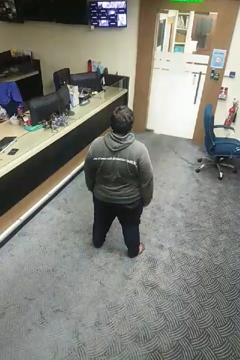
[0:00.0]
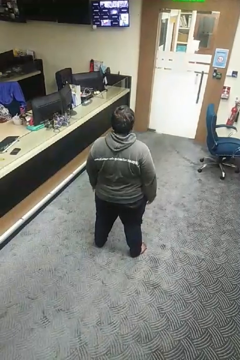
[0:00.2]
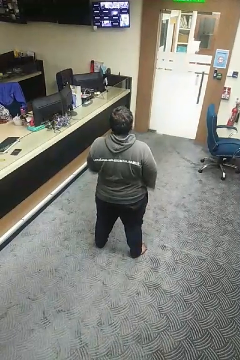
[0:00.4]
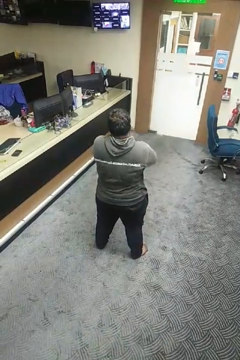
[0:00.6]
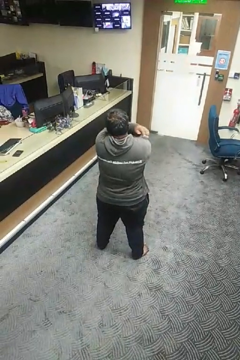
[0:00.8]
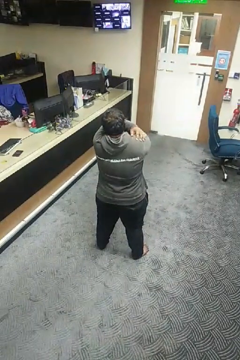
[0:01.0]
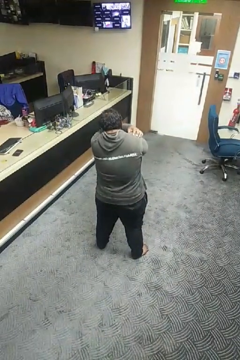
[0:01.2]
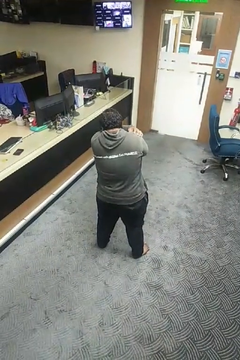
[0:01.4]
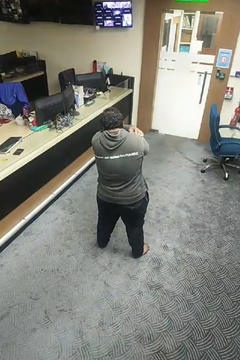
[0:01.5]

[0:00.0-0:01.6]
person sneezes into arm

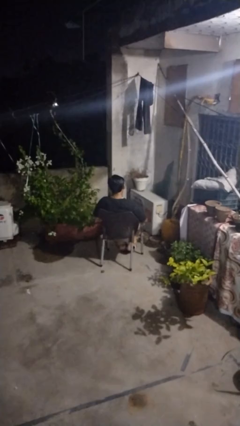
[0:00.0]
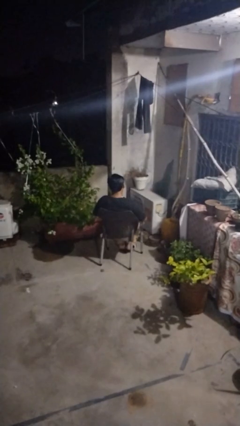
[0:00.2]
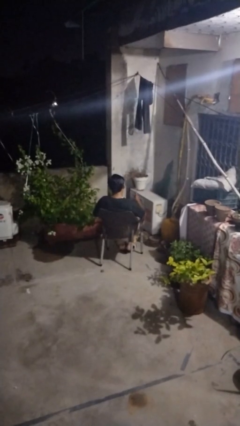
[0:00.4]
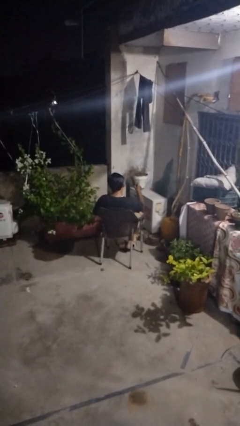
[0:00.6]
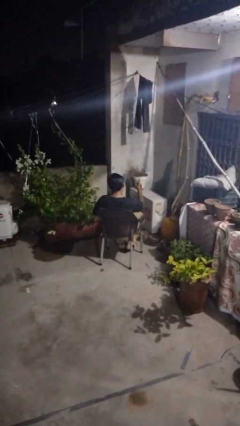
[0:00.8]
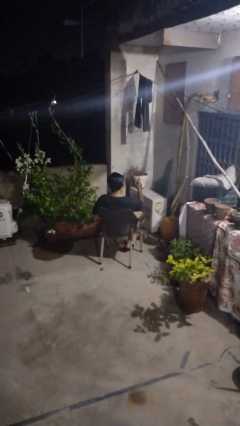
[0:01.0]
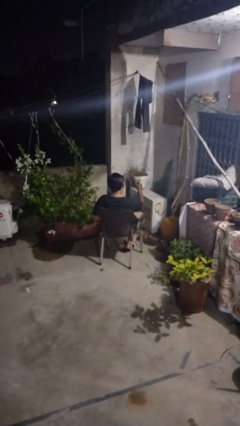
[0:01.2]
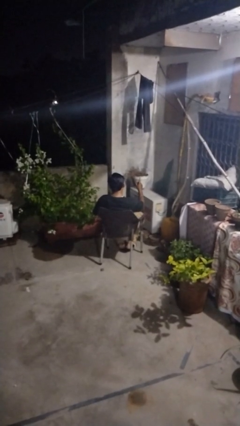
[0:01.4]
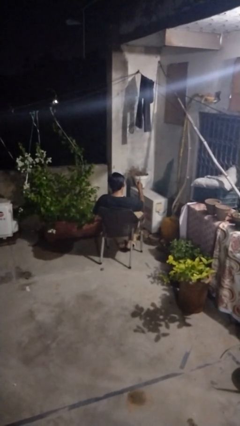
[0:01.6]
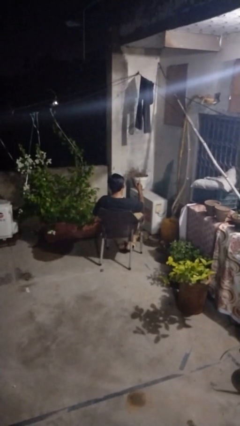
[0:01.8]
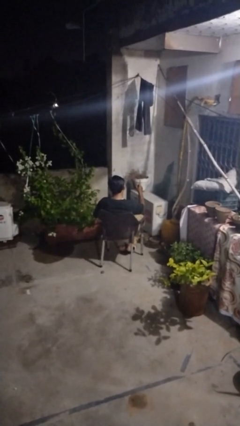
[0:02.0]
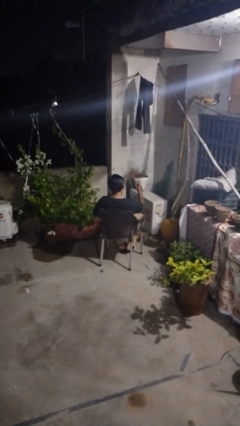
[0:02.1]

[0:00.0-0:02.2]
person gestures number one

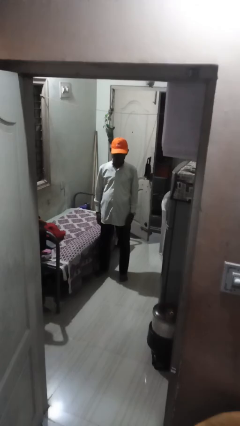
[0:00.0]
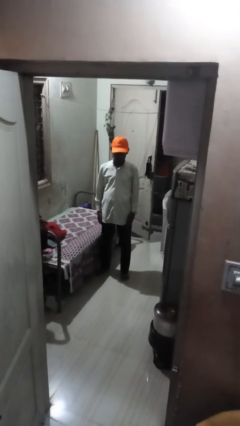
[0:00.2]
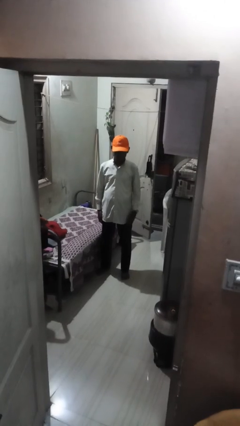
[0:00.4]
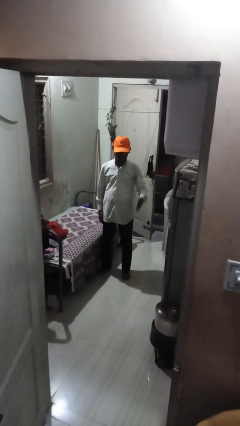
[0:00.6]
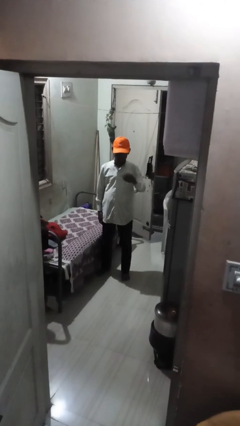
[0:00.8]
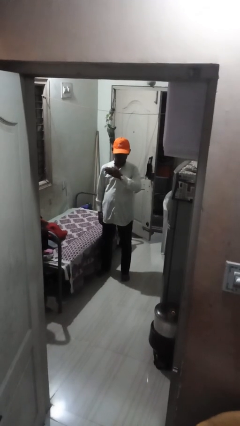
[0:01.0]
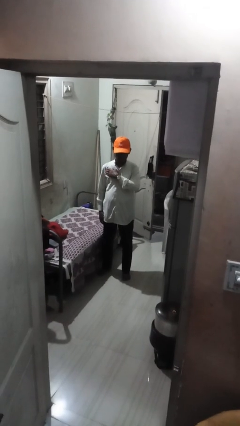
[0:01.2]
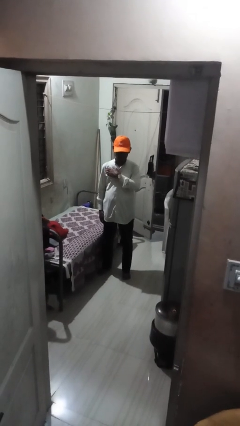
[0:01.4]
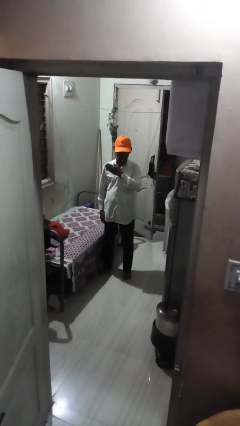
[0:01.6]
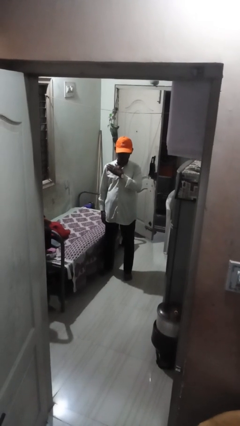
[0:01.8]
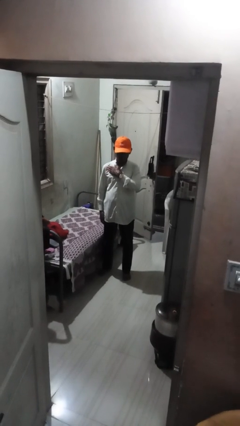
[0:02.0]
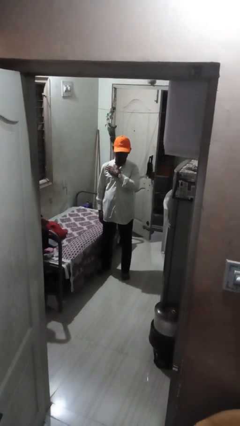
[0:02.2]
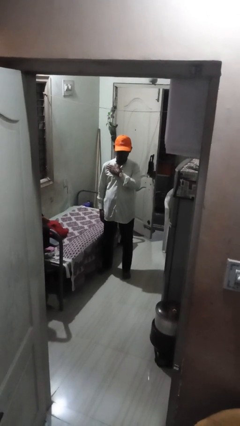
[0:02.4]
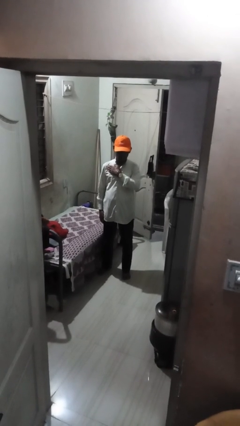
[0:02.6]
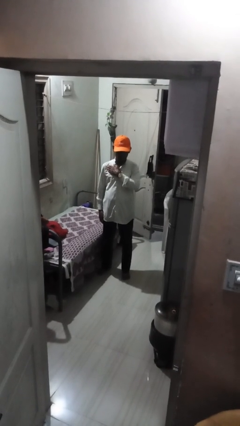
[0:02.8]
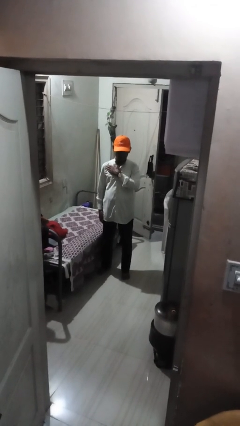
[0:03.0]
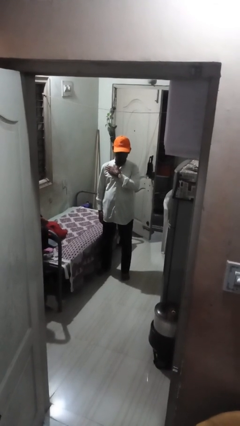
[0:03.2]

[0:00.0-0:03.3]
person drums on chest

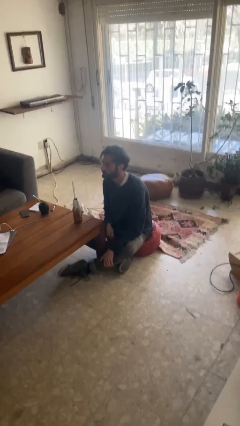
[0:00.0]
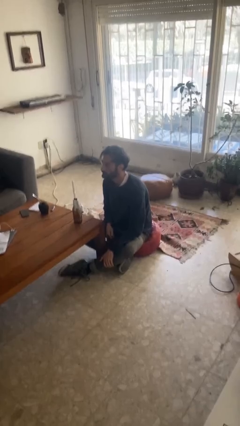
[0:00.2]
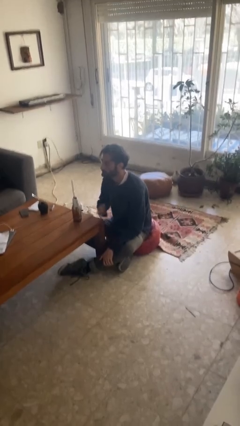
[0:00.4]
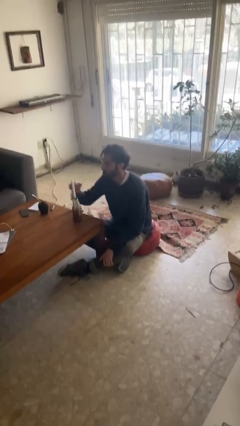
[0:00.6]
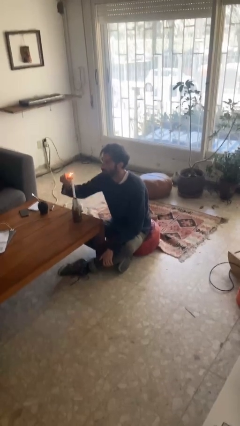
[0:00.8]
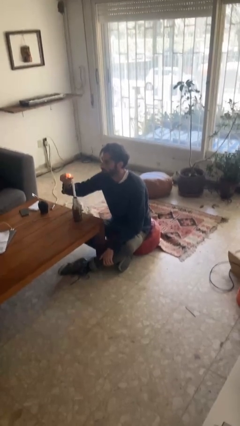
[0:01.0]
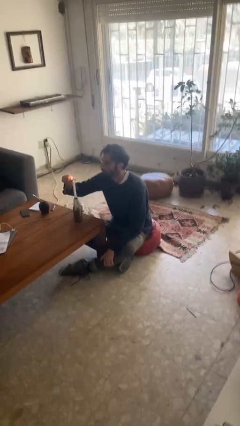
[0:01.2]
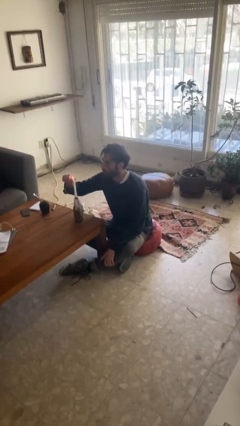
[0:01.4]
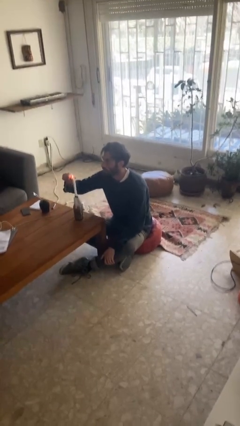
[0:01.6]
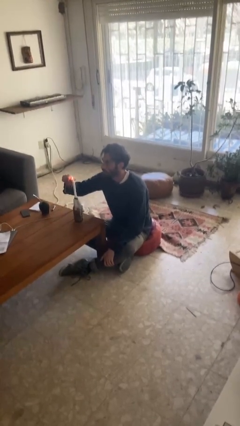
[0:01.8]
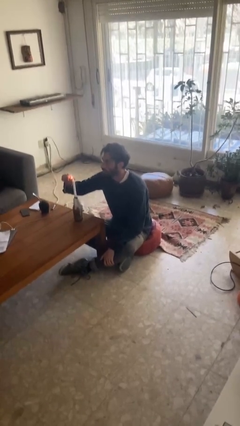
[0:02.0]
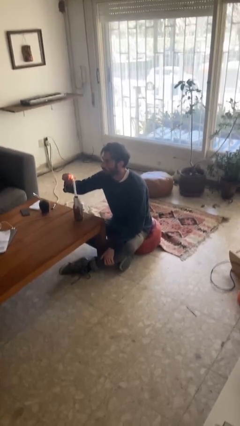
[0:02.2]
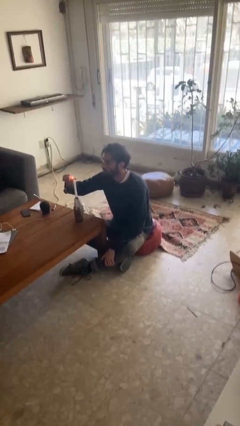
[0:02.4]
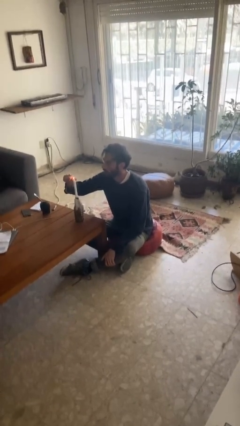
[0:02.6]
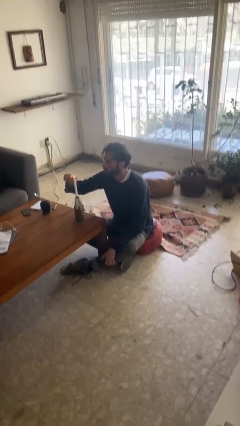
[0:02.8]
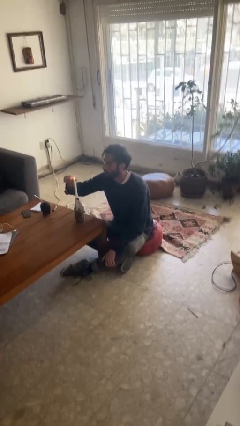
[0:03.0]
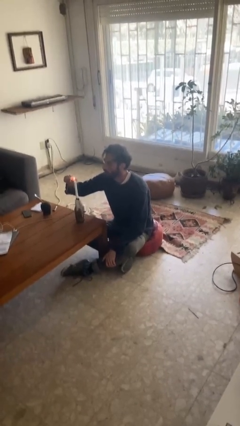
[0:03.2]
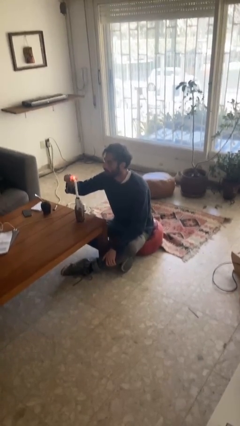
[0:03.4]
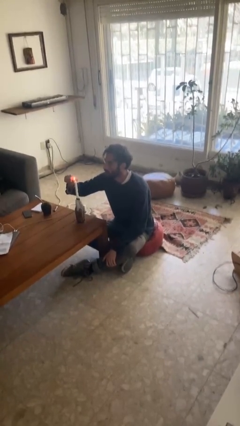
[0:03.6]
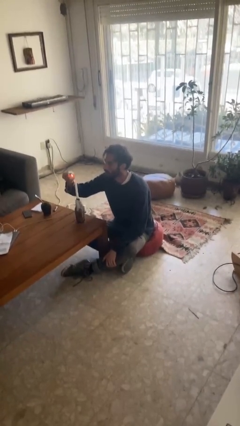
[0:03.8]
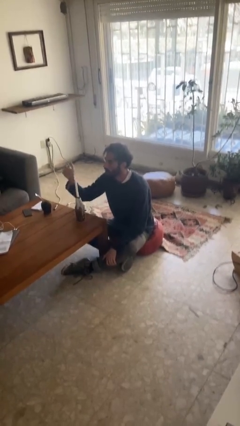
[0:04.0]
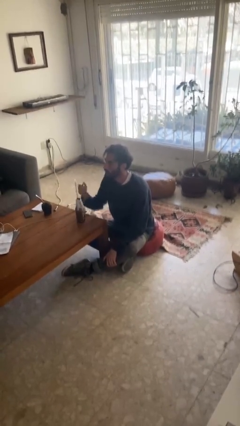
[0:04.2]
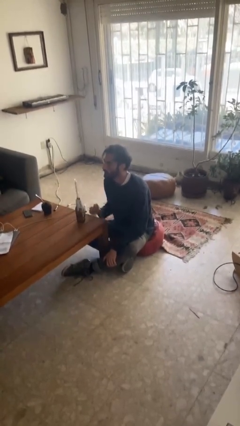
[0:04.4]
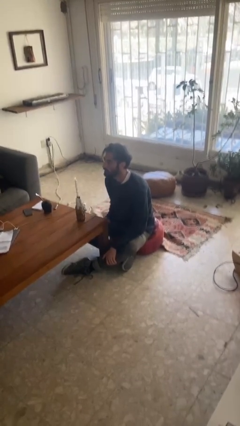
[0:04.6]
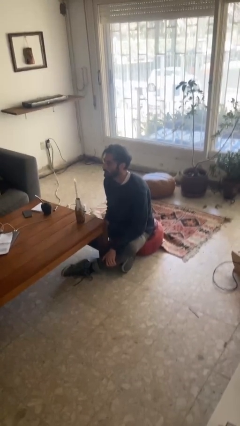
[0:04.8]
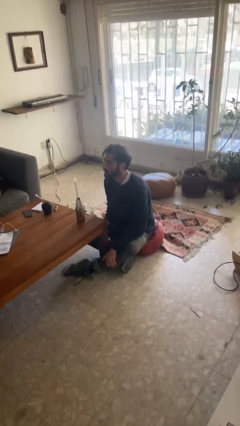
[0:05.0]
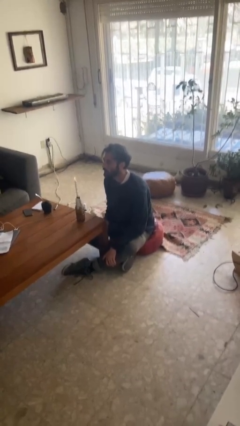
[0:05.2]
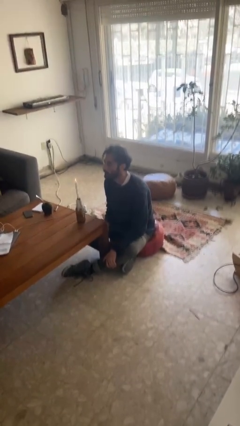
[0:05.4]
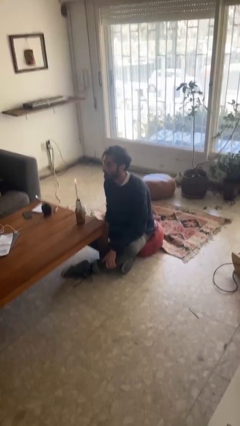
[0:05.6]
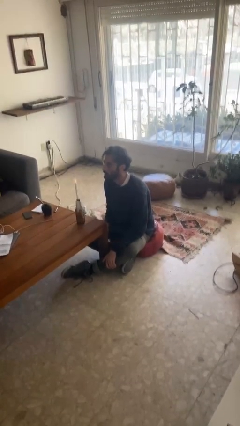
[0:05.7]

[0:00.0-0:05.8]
person lights candle

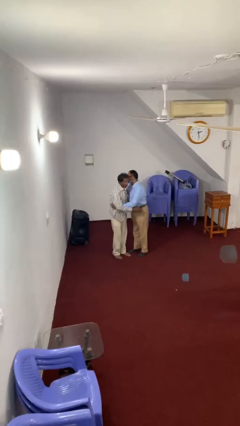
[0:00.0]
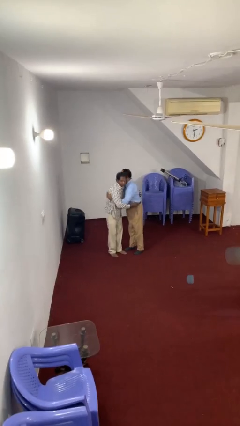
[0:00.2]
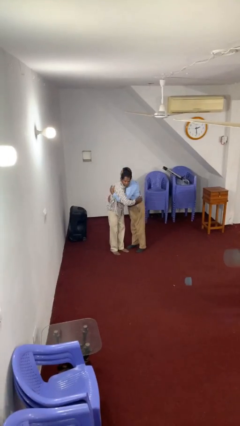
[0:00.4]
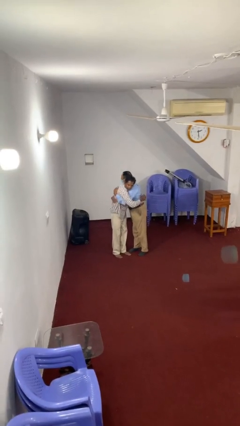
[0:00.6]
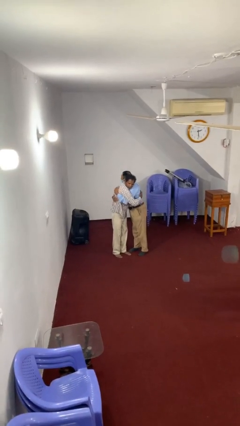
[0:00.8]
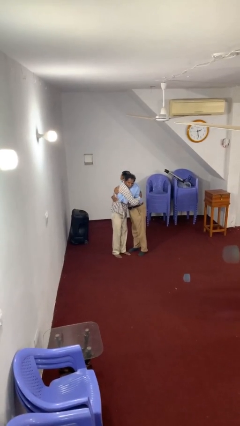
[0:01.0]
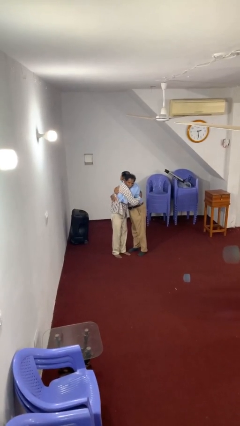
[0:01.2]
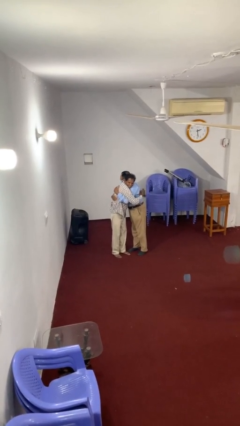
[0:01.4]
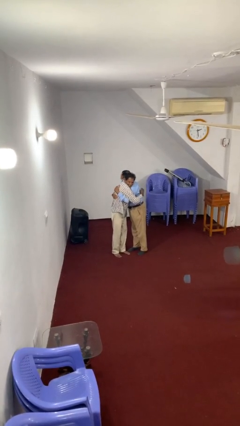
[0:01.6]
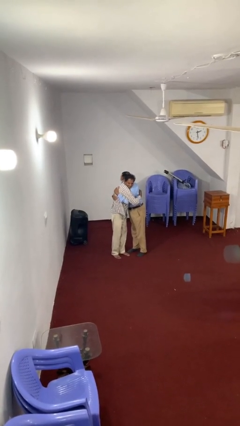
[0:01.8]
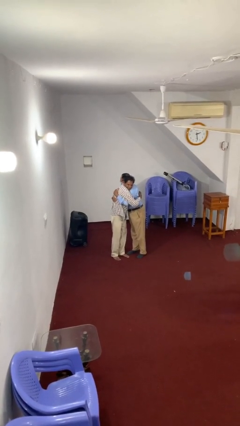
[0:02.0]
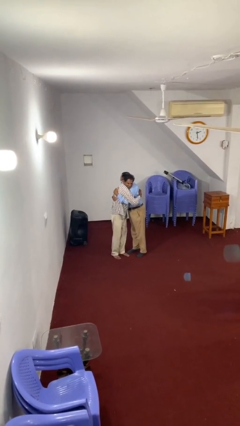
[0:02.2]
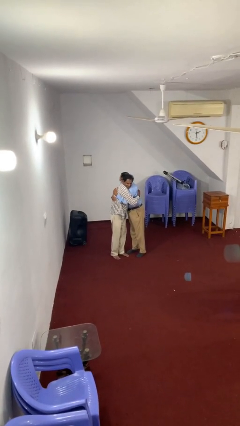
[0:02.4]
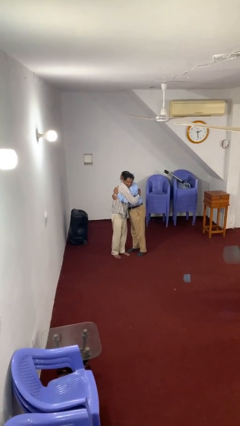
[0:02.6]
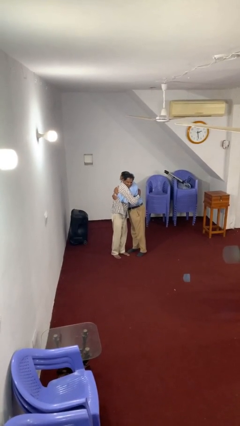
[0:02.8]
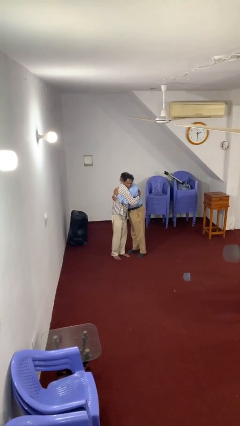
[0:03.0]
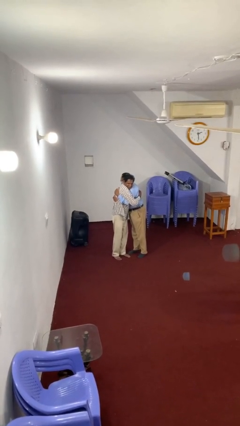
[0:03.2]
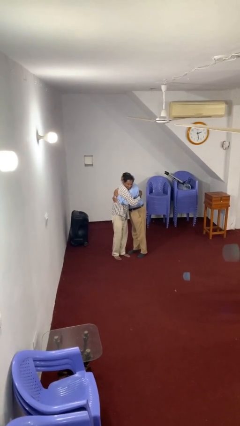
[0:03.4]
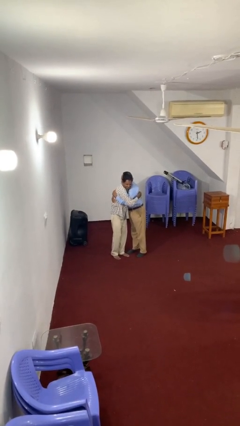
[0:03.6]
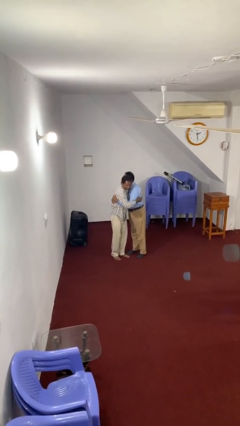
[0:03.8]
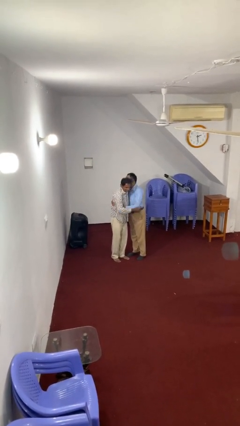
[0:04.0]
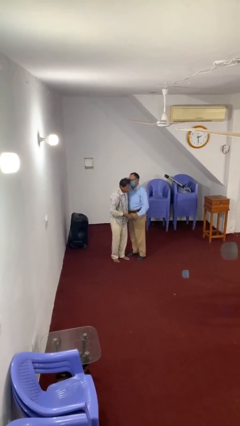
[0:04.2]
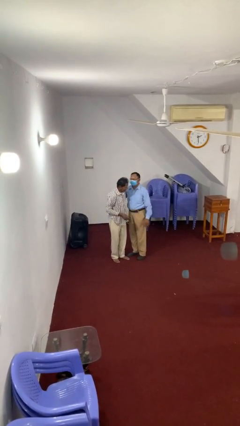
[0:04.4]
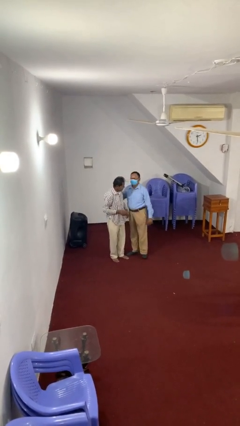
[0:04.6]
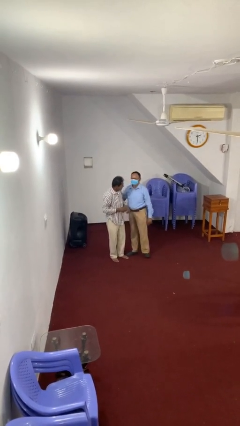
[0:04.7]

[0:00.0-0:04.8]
person embraces person
